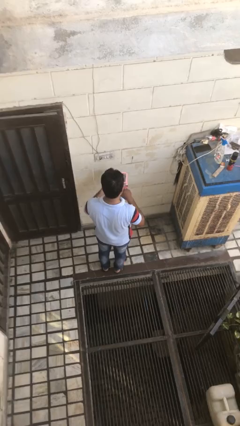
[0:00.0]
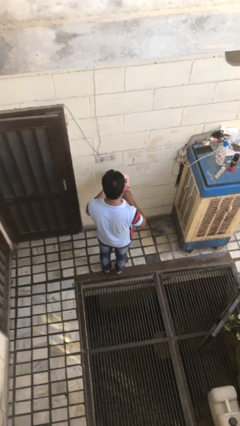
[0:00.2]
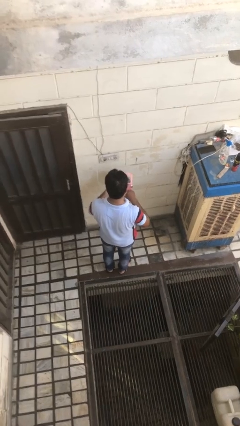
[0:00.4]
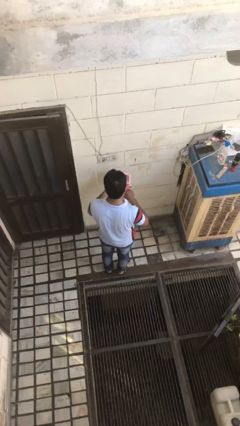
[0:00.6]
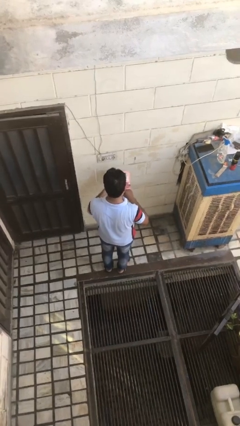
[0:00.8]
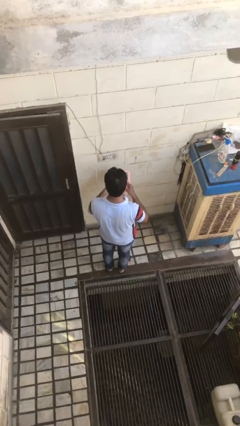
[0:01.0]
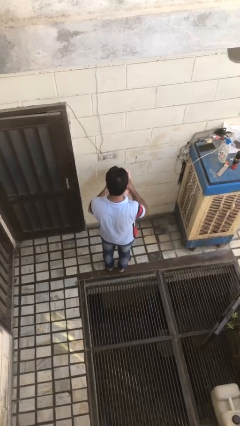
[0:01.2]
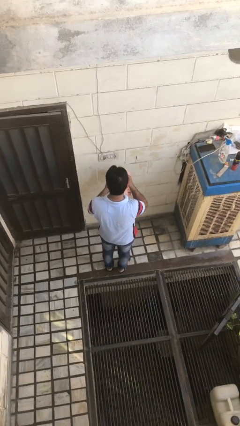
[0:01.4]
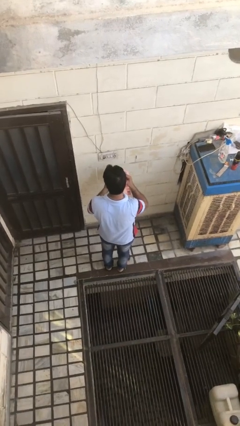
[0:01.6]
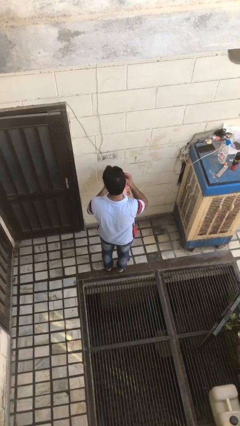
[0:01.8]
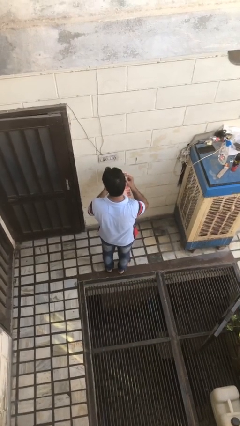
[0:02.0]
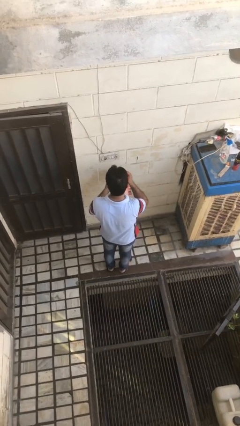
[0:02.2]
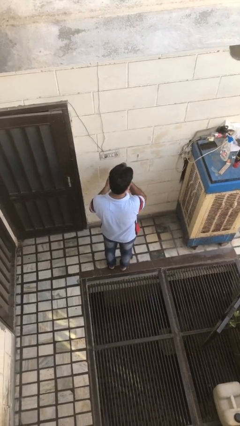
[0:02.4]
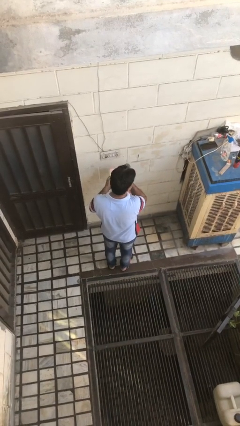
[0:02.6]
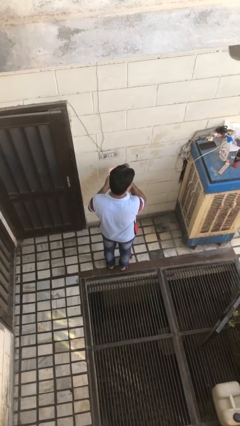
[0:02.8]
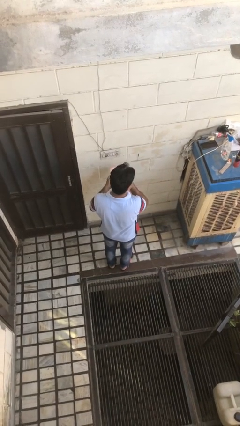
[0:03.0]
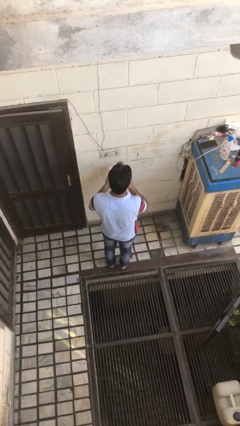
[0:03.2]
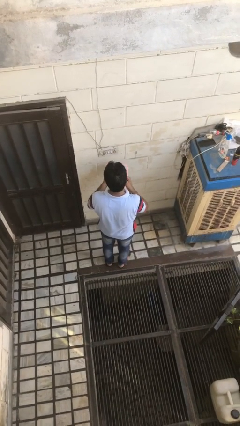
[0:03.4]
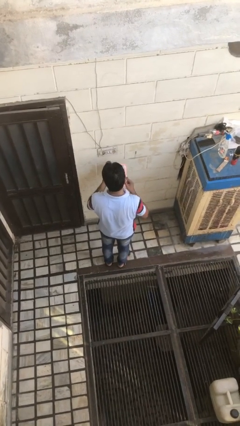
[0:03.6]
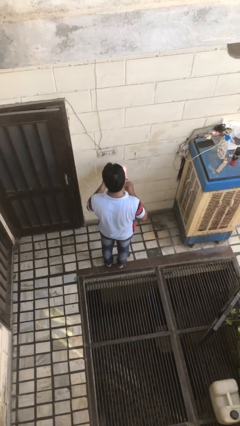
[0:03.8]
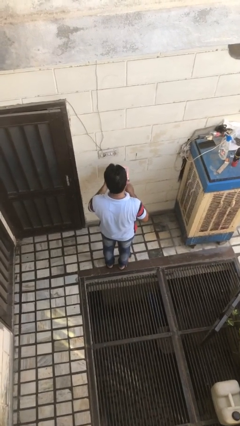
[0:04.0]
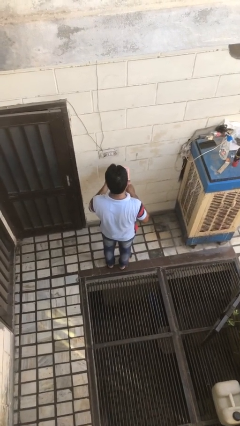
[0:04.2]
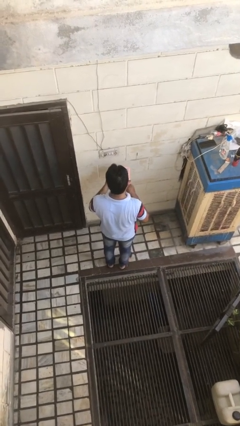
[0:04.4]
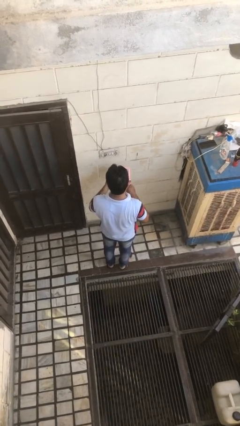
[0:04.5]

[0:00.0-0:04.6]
person applies foundation makeup

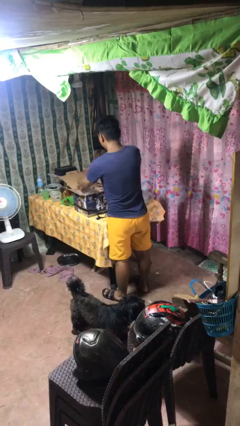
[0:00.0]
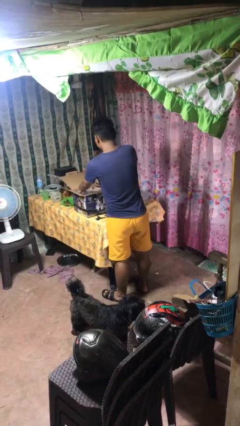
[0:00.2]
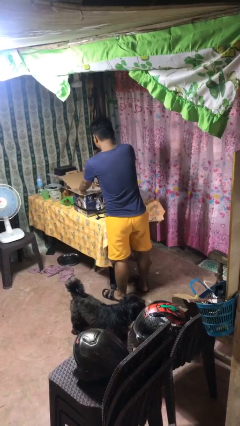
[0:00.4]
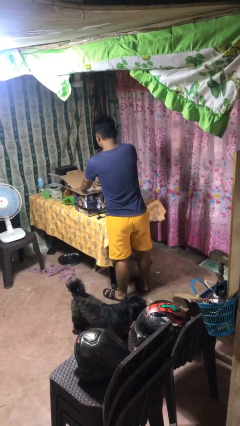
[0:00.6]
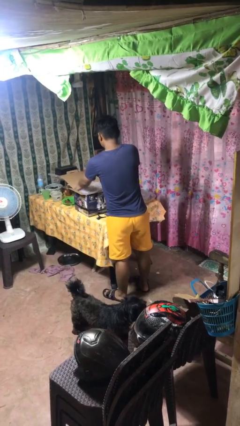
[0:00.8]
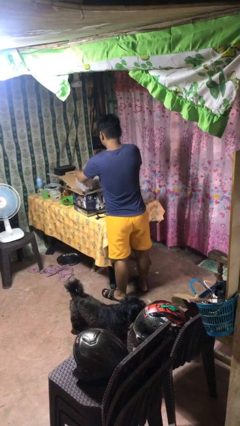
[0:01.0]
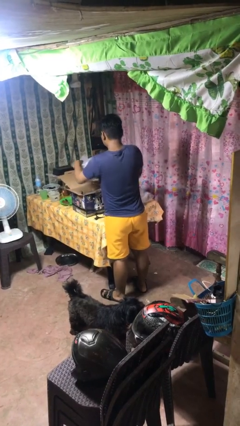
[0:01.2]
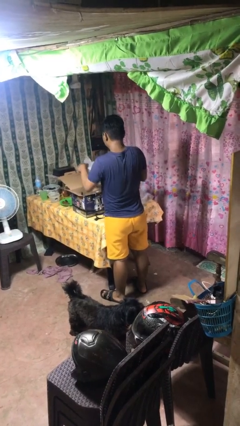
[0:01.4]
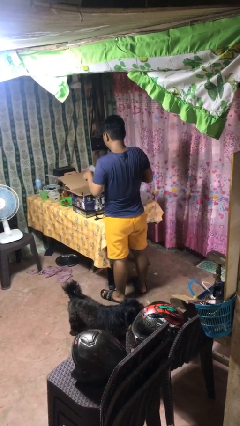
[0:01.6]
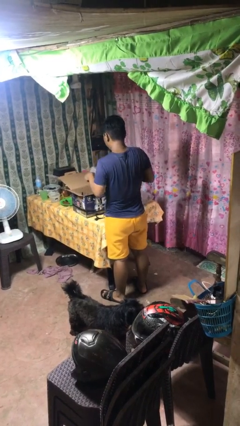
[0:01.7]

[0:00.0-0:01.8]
person takes object from box

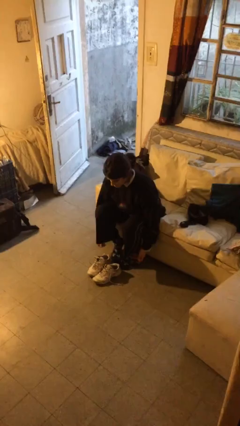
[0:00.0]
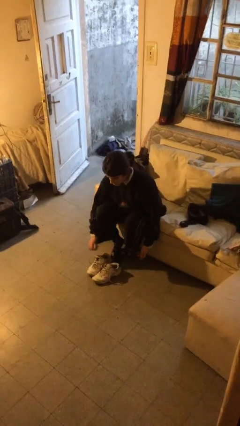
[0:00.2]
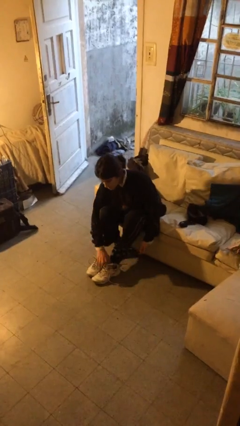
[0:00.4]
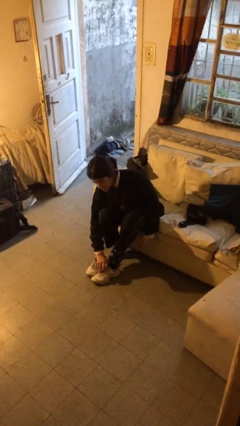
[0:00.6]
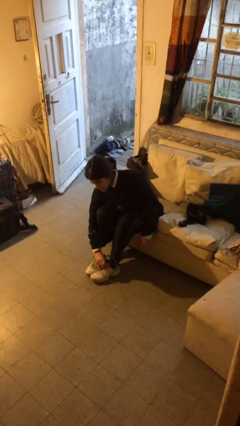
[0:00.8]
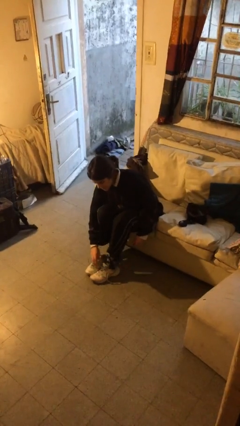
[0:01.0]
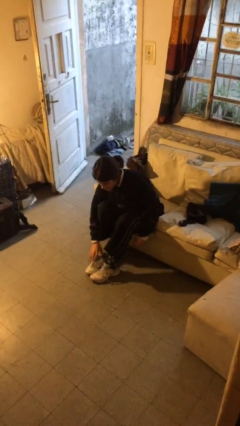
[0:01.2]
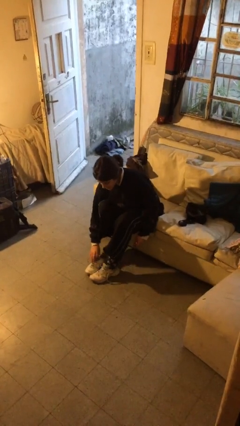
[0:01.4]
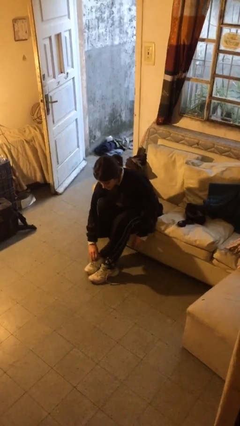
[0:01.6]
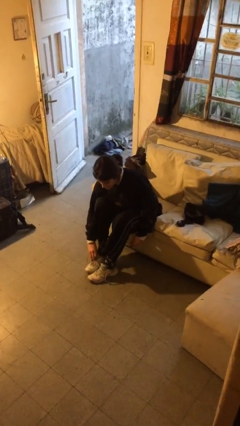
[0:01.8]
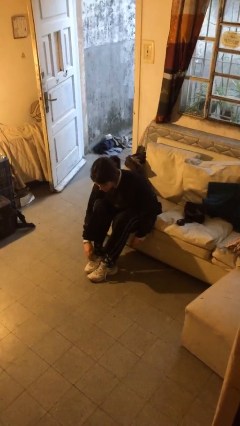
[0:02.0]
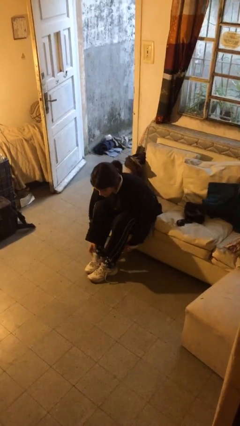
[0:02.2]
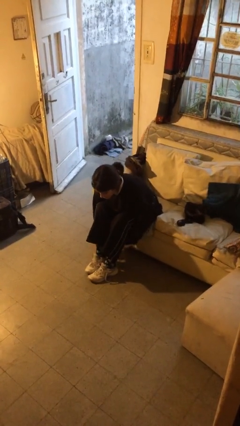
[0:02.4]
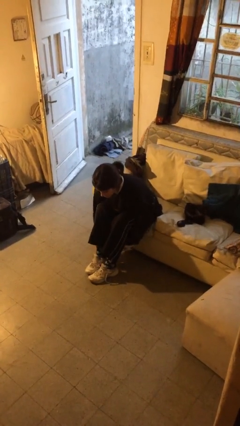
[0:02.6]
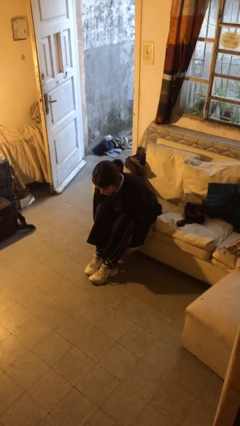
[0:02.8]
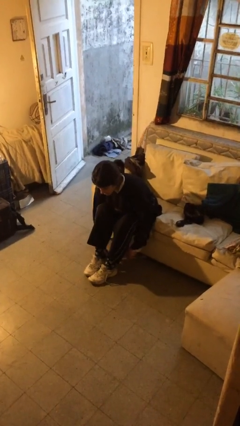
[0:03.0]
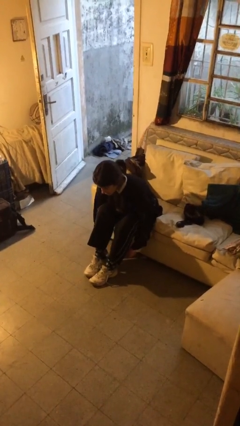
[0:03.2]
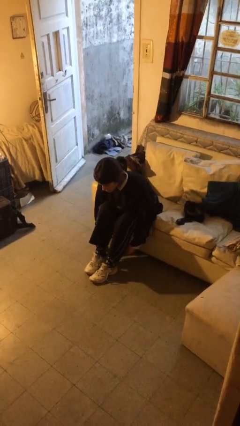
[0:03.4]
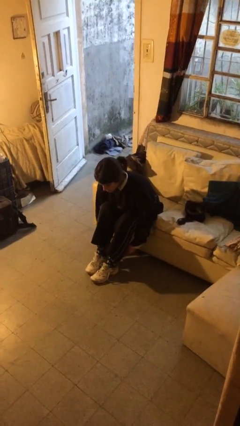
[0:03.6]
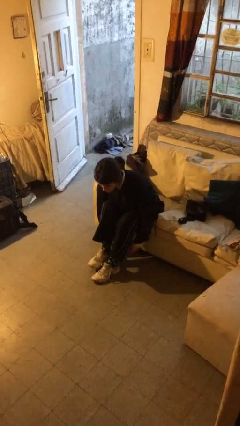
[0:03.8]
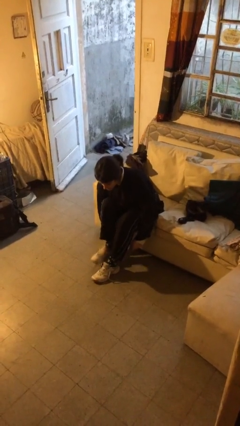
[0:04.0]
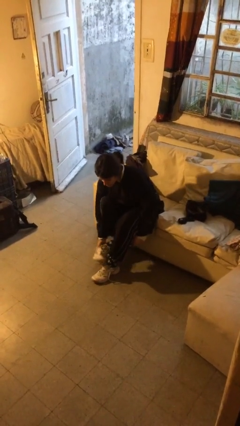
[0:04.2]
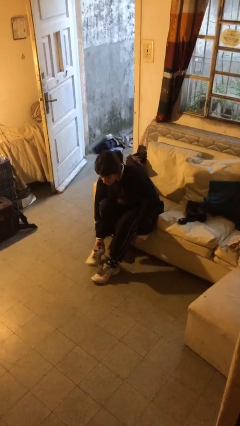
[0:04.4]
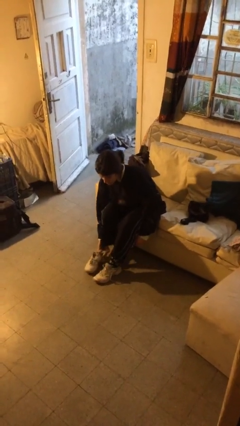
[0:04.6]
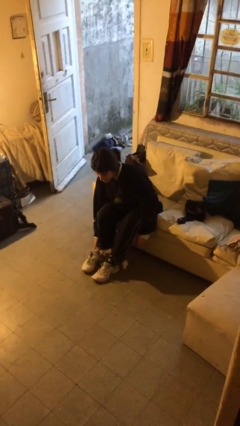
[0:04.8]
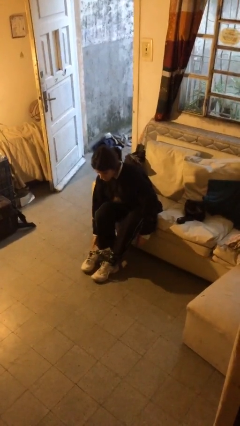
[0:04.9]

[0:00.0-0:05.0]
person puts on shoes

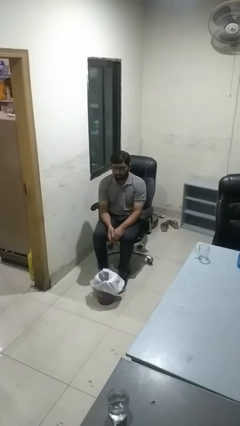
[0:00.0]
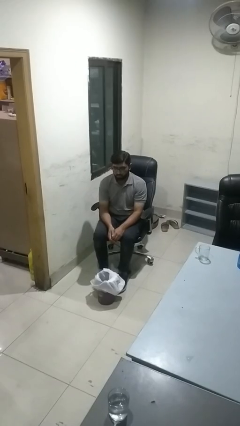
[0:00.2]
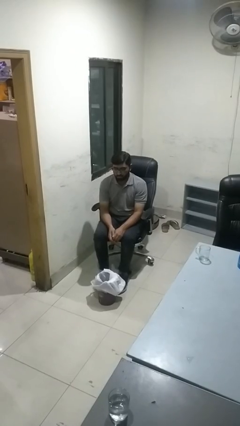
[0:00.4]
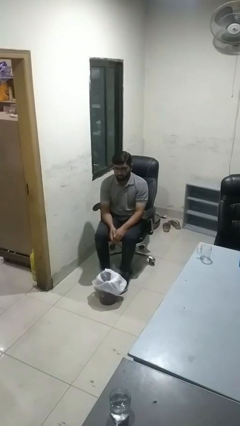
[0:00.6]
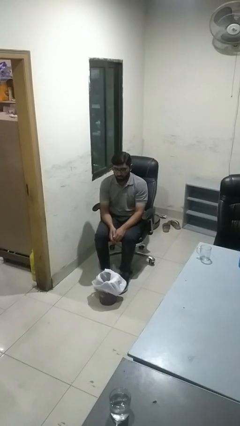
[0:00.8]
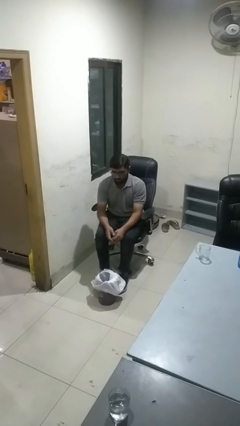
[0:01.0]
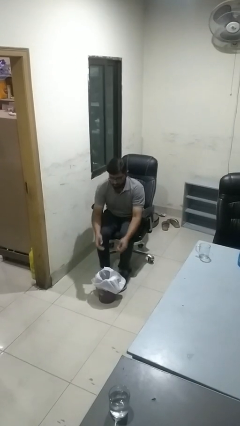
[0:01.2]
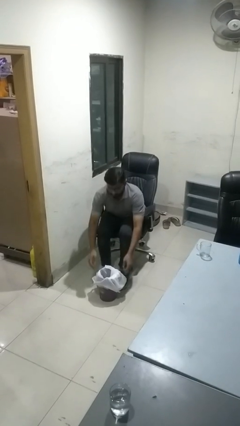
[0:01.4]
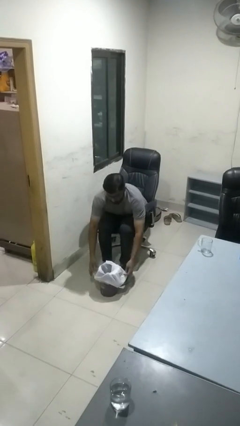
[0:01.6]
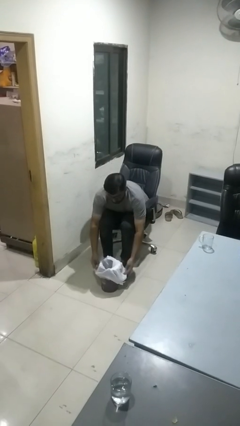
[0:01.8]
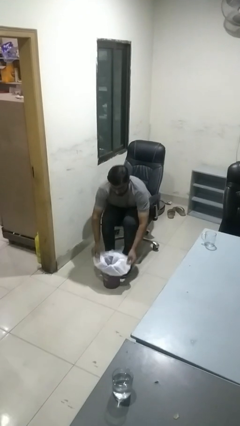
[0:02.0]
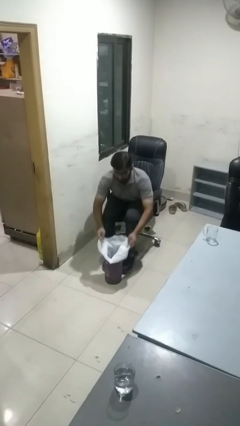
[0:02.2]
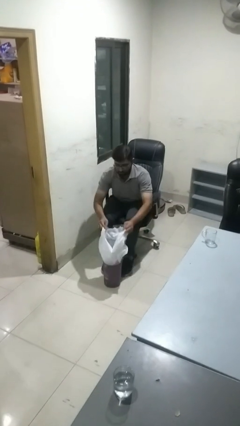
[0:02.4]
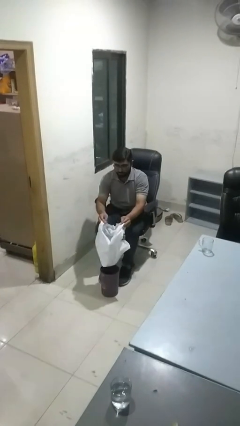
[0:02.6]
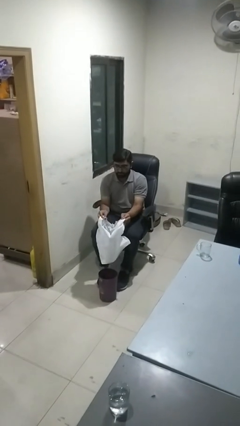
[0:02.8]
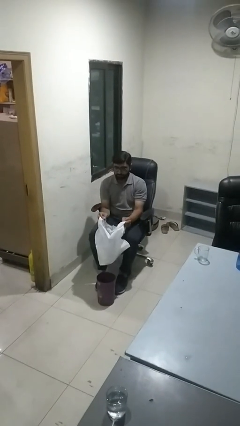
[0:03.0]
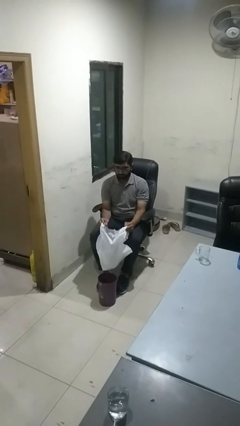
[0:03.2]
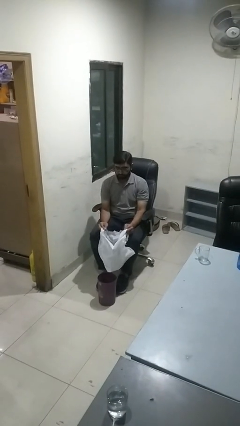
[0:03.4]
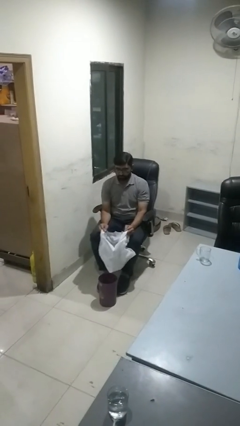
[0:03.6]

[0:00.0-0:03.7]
person removes trashbag from trashcan

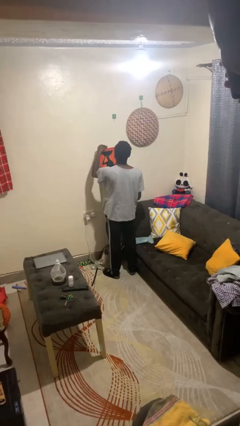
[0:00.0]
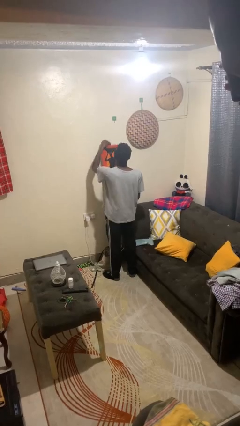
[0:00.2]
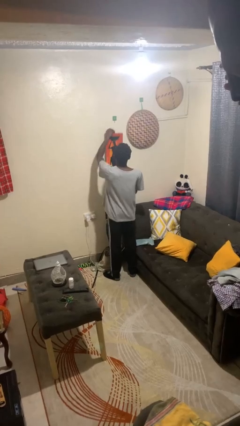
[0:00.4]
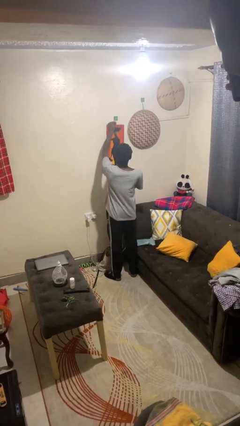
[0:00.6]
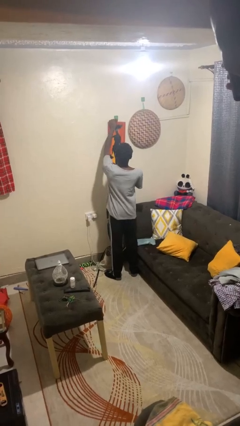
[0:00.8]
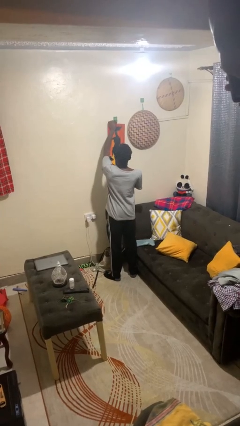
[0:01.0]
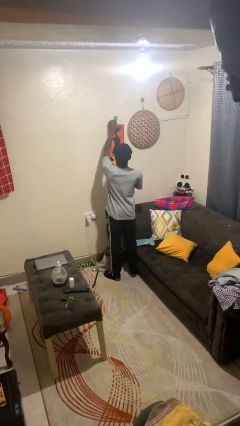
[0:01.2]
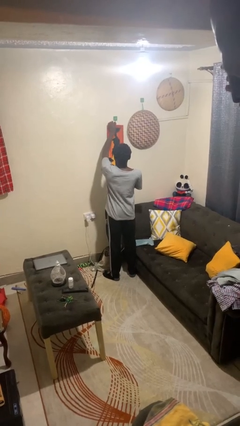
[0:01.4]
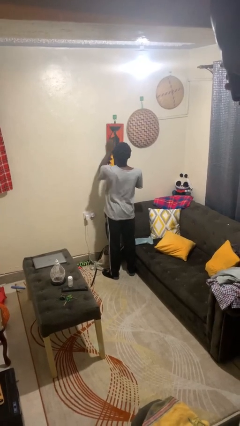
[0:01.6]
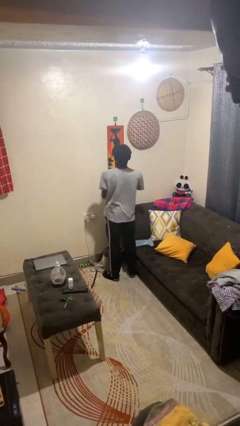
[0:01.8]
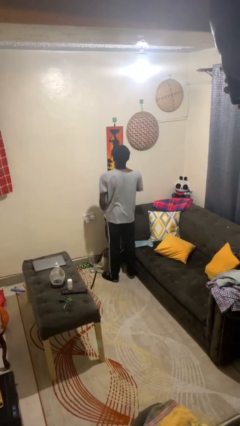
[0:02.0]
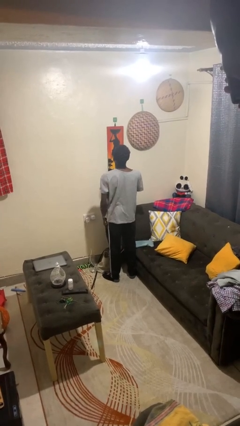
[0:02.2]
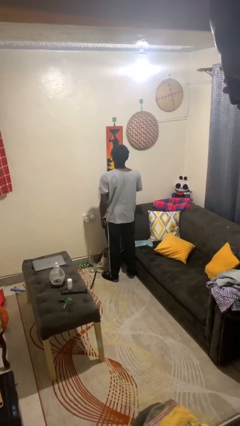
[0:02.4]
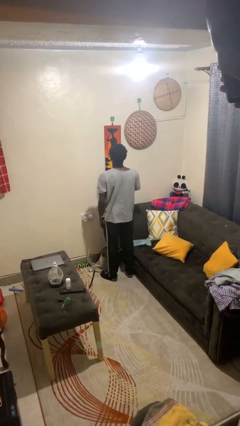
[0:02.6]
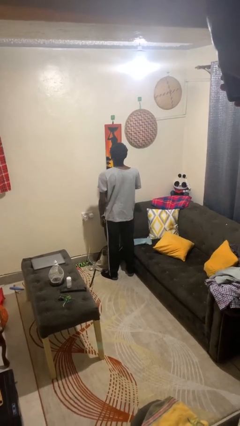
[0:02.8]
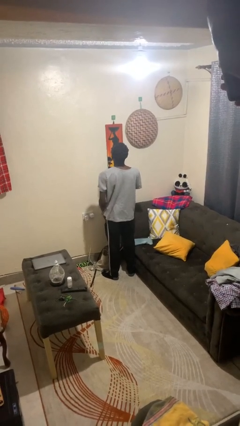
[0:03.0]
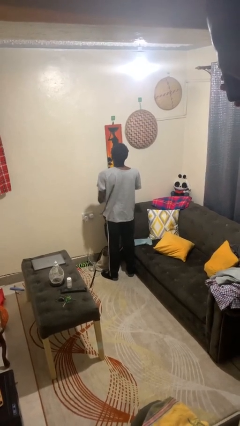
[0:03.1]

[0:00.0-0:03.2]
person puts up picture frame
